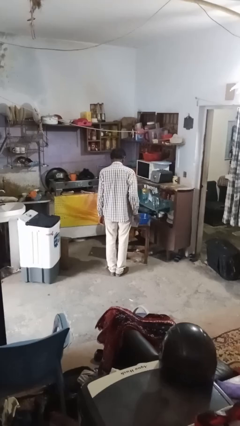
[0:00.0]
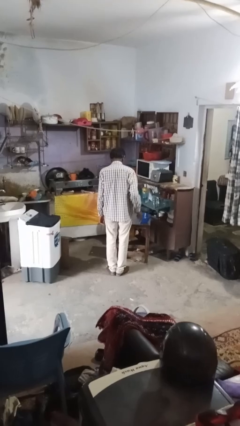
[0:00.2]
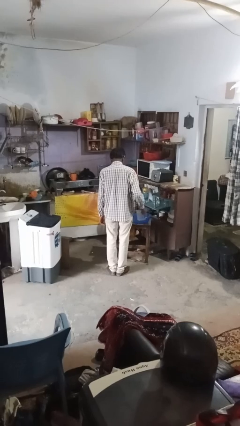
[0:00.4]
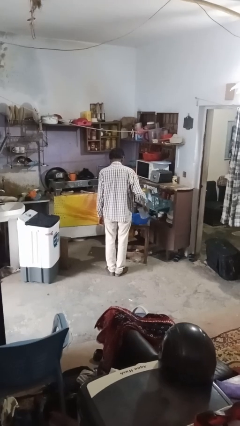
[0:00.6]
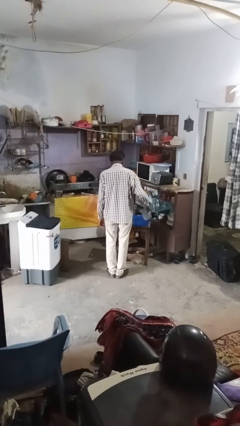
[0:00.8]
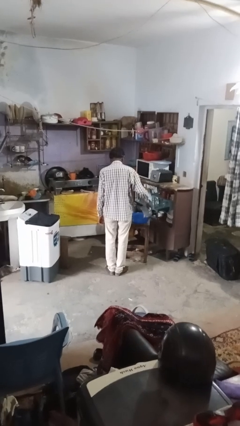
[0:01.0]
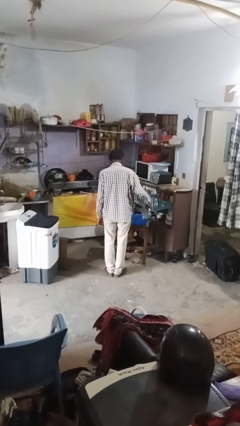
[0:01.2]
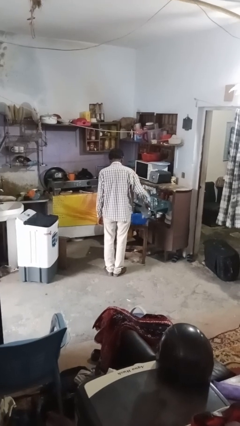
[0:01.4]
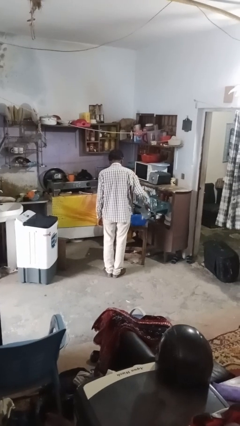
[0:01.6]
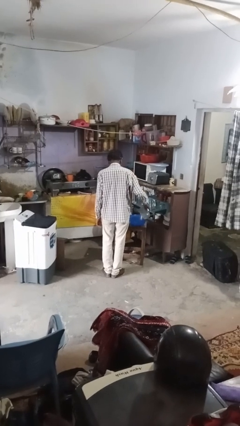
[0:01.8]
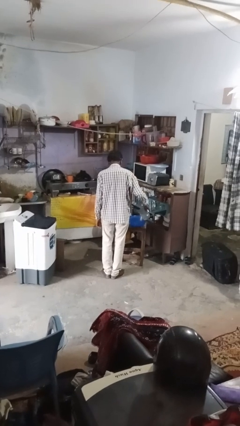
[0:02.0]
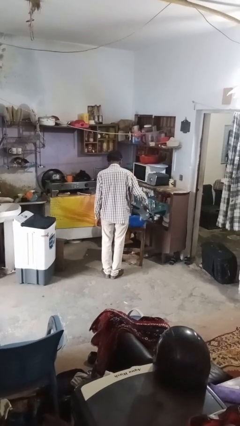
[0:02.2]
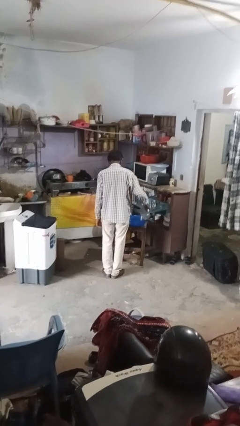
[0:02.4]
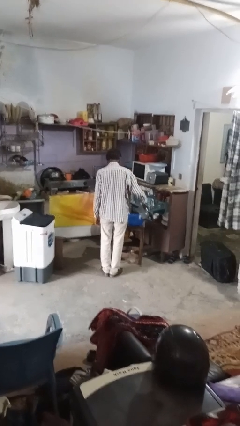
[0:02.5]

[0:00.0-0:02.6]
person pours into bowl

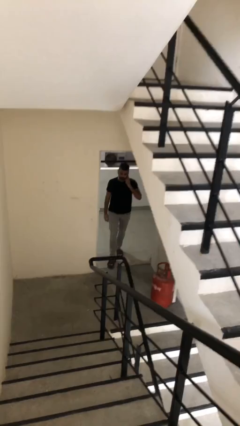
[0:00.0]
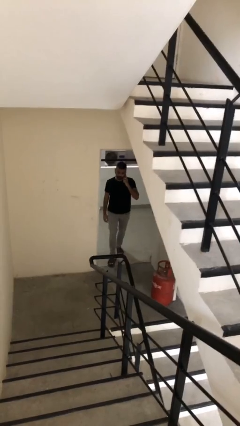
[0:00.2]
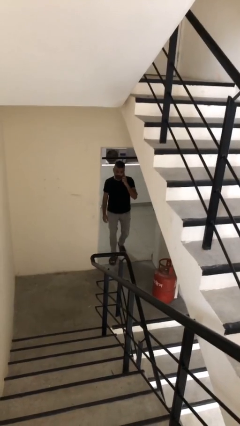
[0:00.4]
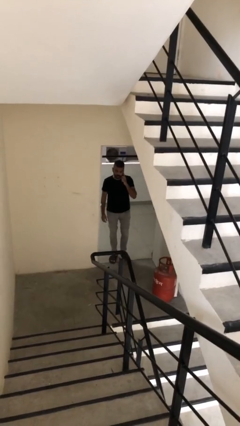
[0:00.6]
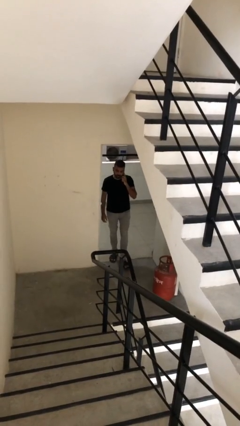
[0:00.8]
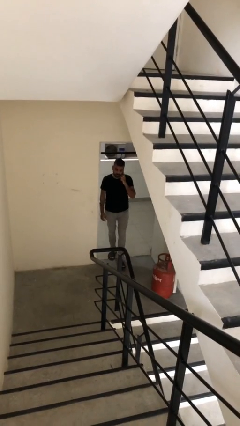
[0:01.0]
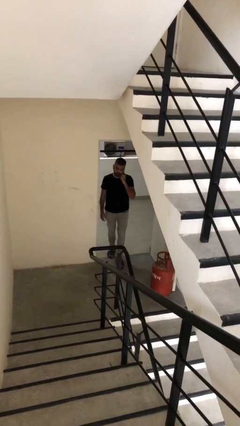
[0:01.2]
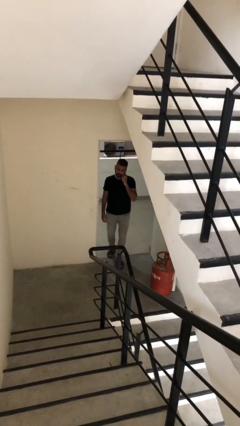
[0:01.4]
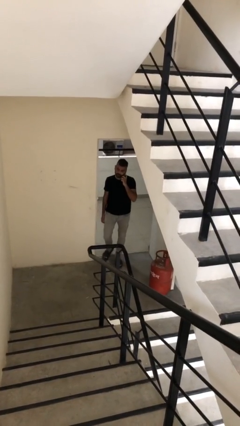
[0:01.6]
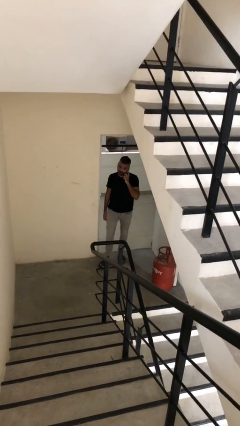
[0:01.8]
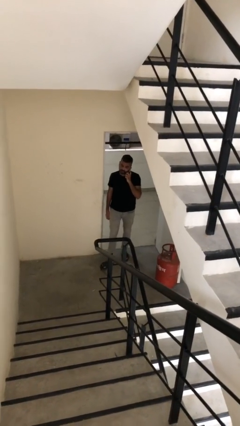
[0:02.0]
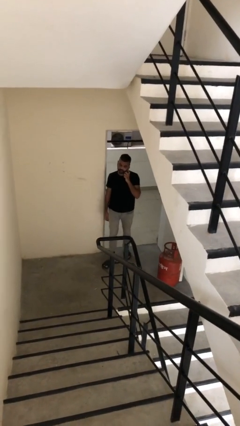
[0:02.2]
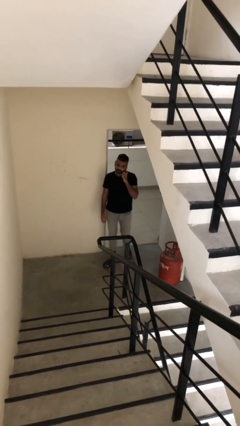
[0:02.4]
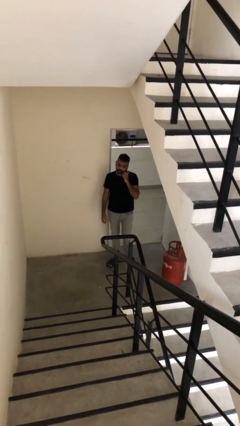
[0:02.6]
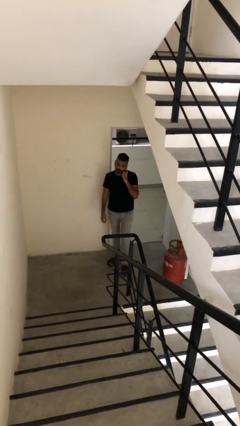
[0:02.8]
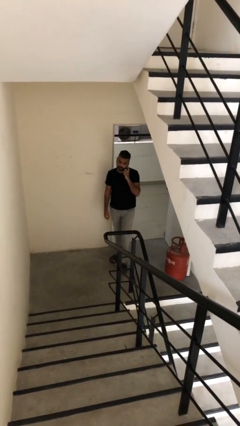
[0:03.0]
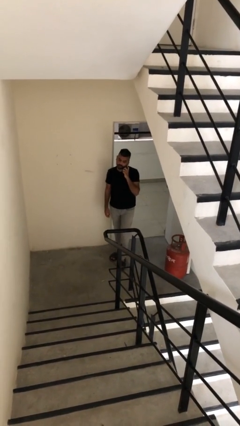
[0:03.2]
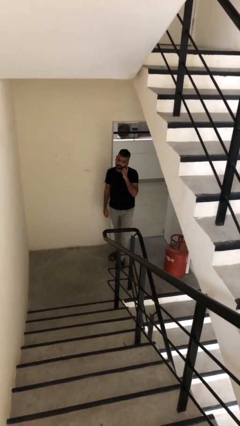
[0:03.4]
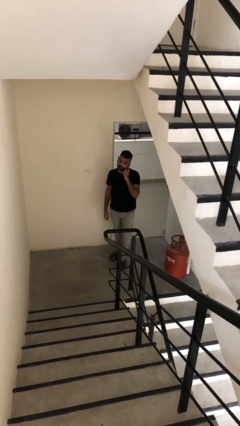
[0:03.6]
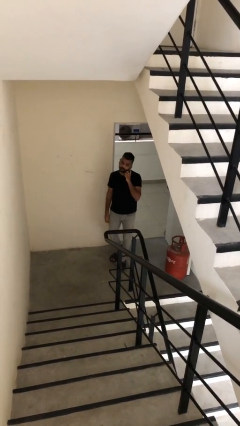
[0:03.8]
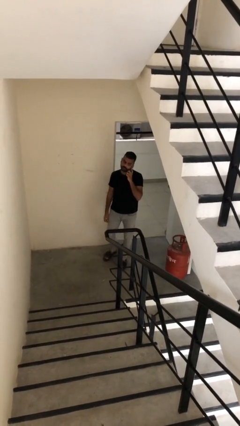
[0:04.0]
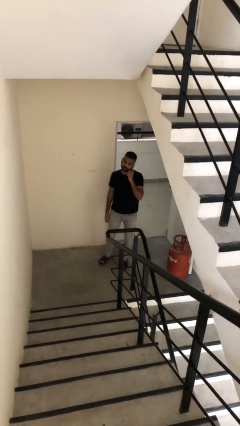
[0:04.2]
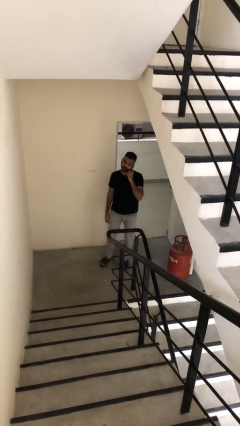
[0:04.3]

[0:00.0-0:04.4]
person enters scene through structure

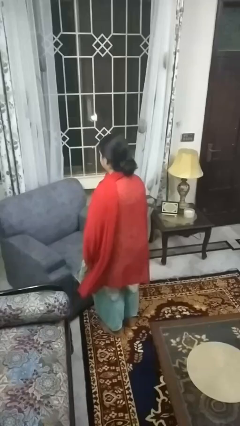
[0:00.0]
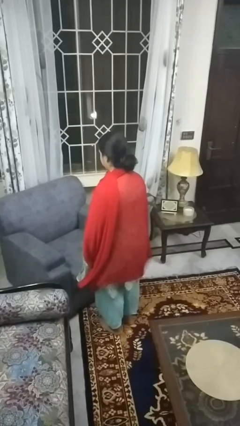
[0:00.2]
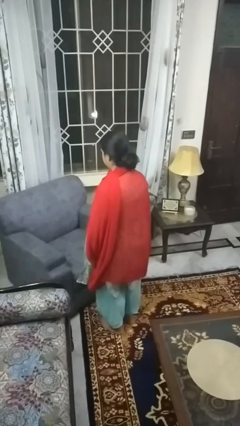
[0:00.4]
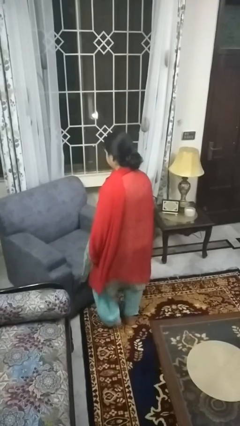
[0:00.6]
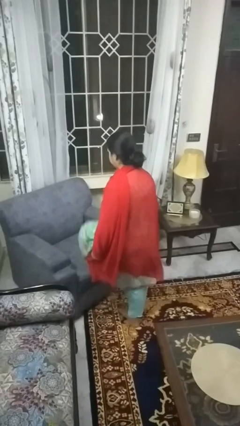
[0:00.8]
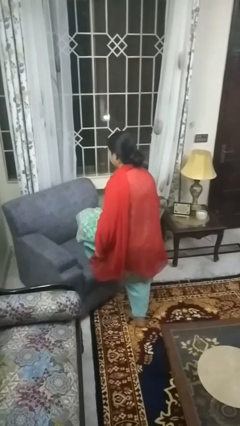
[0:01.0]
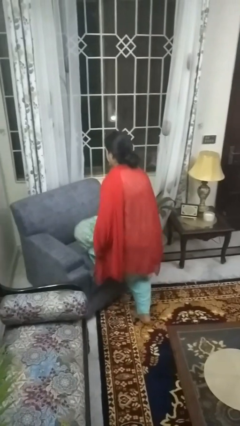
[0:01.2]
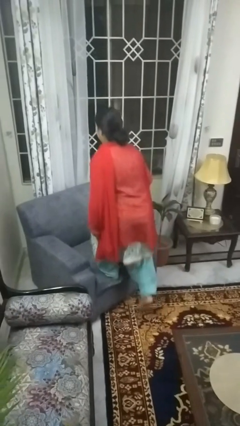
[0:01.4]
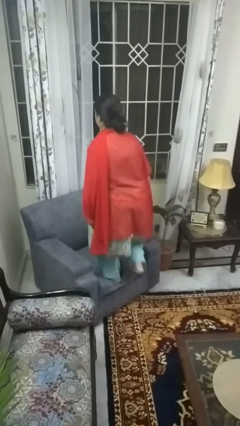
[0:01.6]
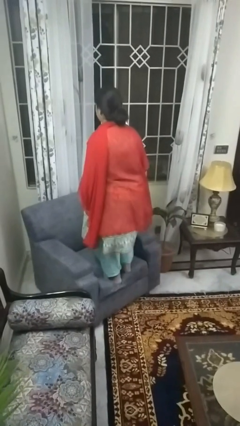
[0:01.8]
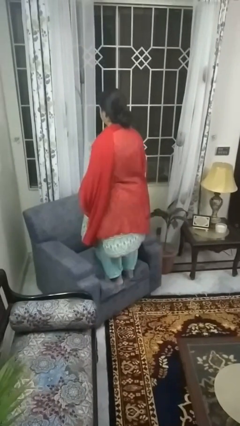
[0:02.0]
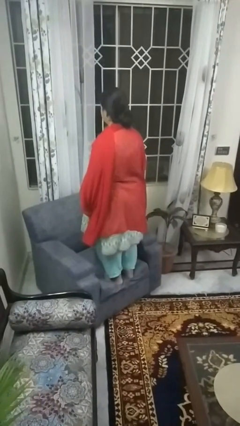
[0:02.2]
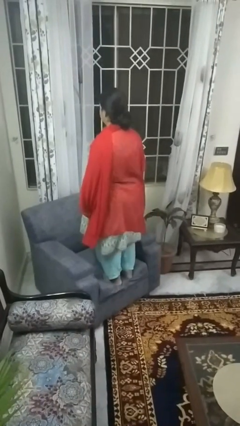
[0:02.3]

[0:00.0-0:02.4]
person climbs on couch

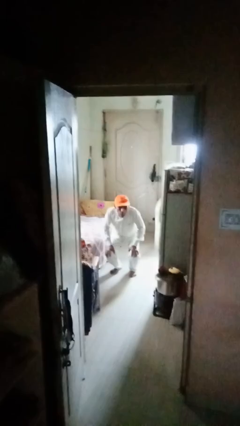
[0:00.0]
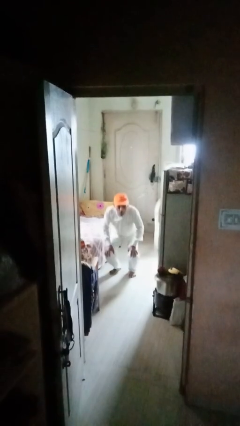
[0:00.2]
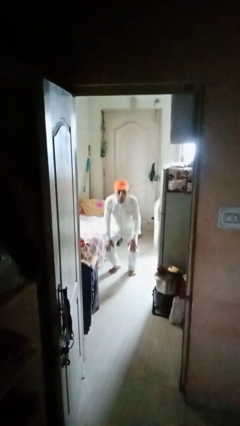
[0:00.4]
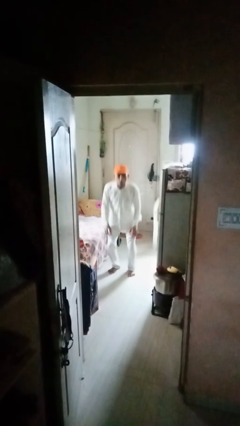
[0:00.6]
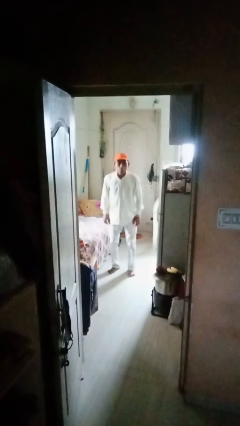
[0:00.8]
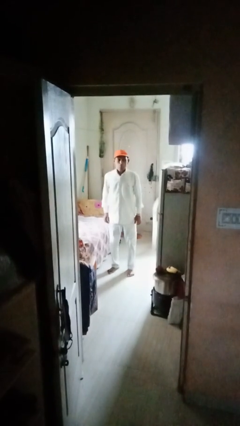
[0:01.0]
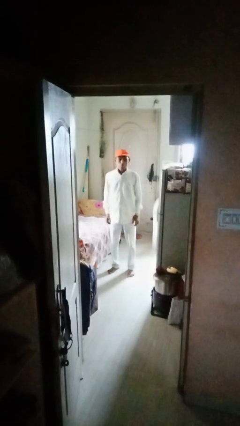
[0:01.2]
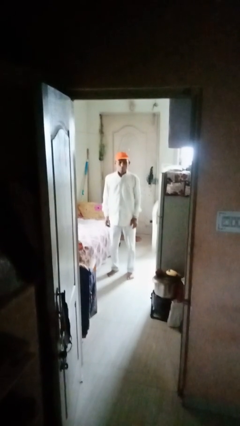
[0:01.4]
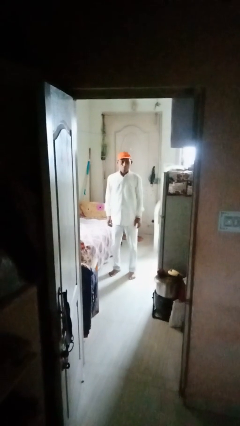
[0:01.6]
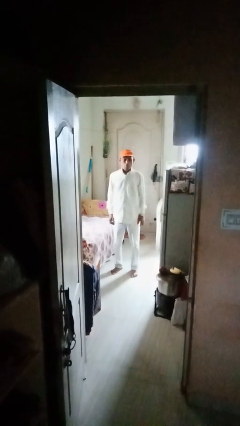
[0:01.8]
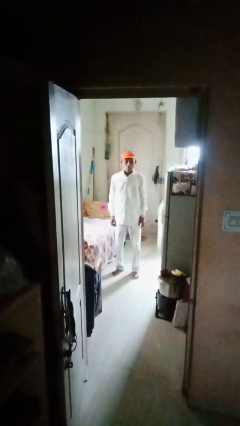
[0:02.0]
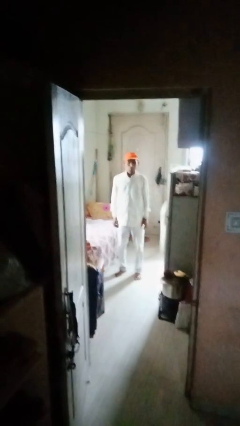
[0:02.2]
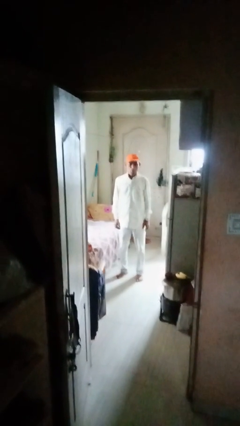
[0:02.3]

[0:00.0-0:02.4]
person stands up

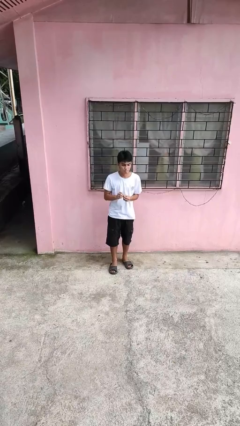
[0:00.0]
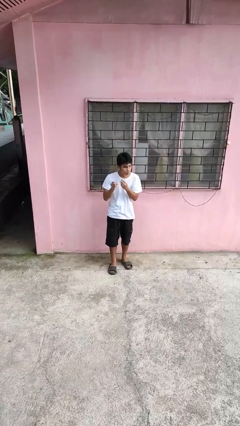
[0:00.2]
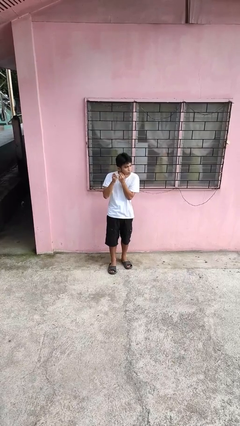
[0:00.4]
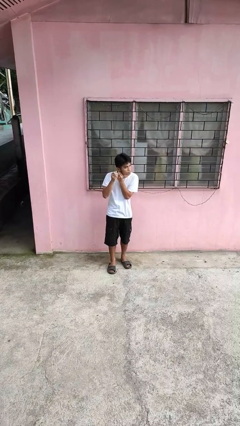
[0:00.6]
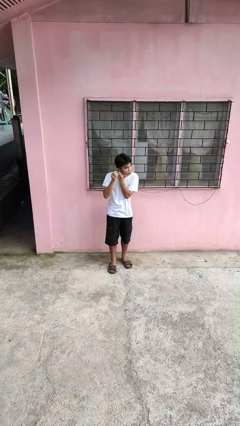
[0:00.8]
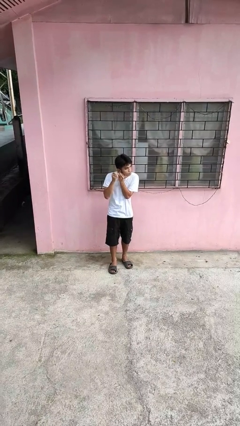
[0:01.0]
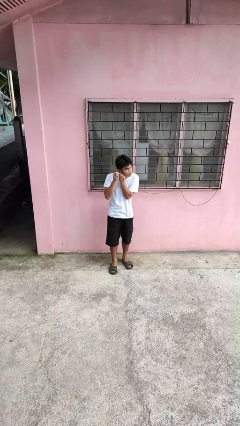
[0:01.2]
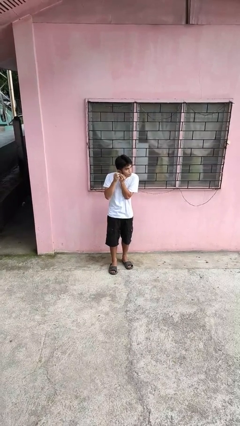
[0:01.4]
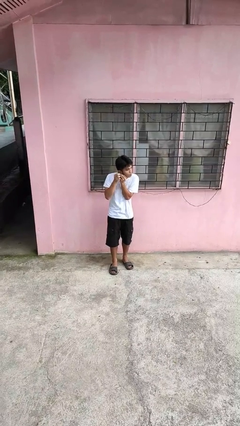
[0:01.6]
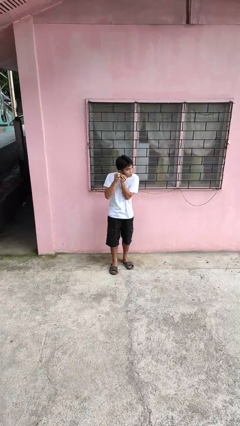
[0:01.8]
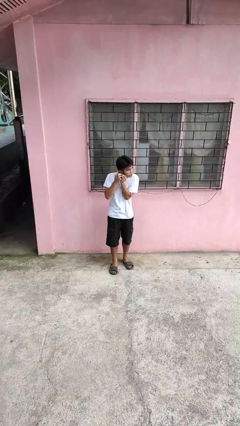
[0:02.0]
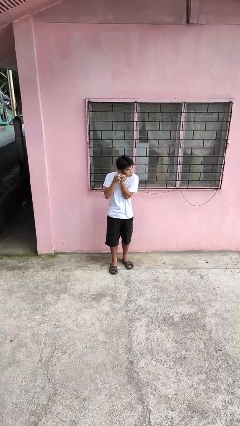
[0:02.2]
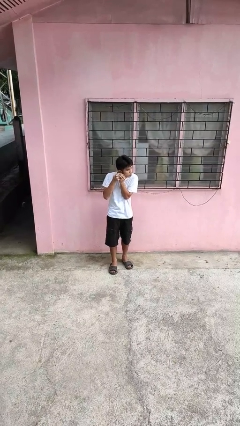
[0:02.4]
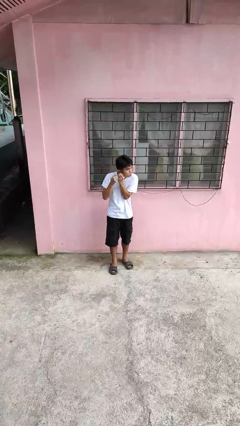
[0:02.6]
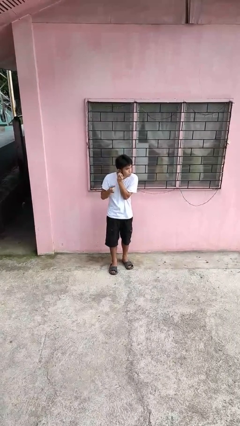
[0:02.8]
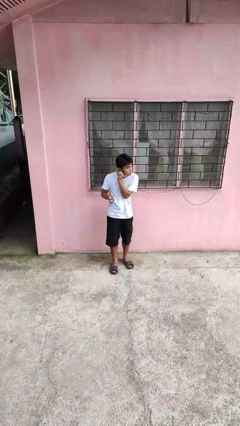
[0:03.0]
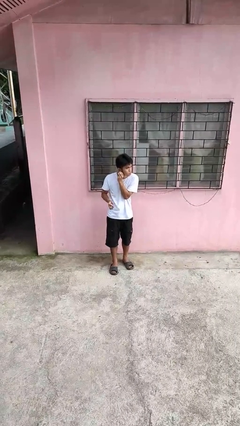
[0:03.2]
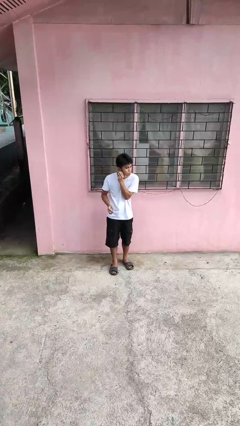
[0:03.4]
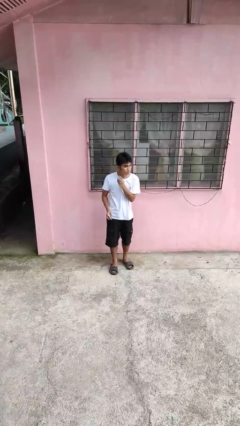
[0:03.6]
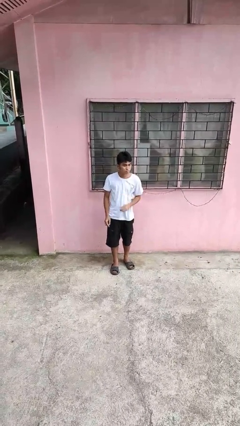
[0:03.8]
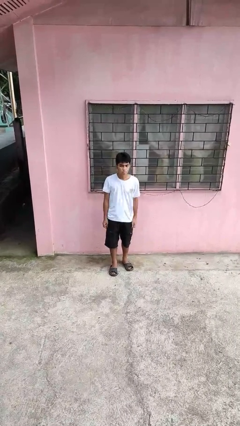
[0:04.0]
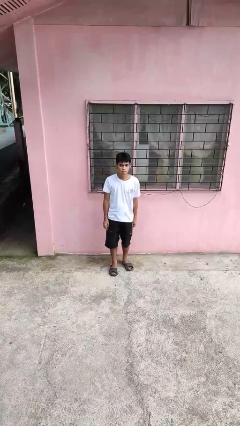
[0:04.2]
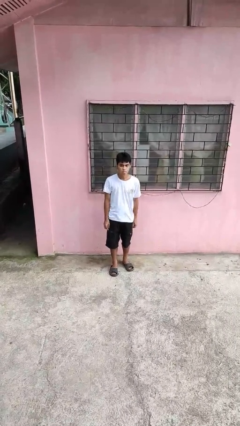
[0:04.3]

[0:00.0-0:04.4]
person puts on earrings

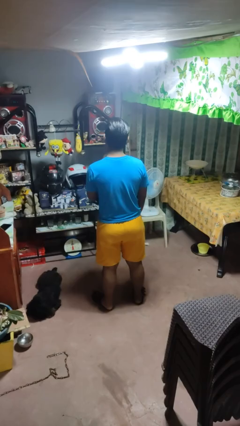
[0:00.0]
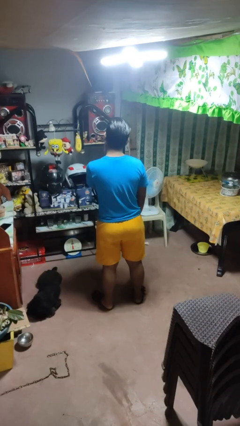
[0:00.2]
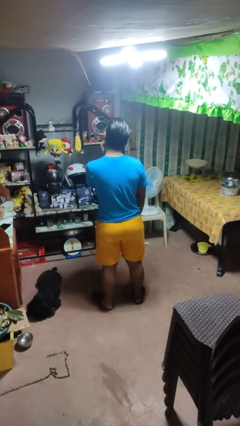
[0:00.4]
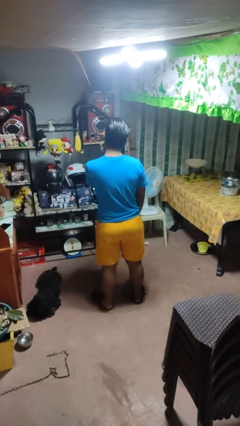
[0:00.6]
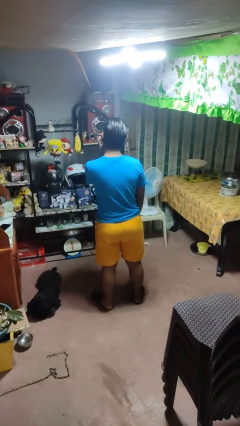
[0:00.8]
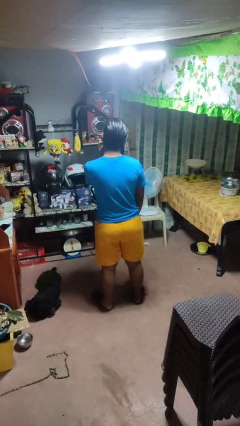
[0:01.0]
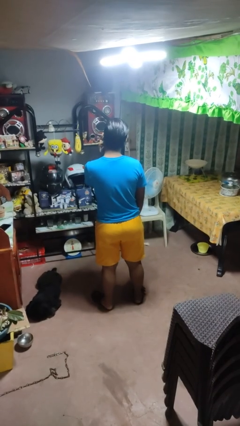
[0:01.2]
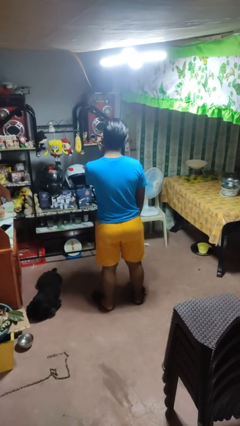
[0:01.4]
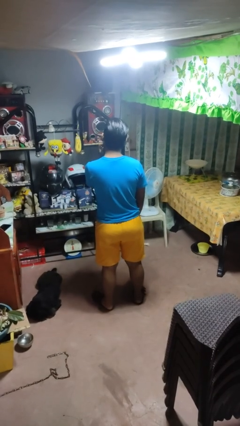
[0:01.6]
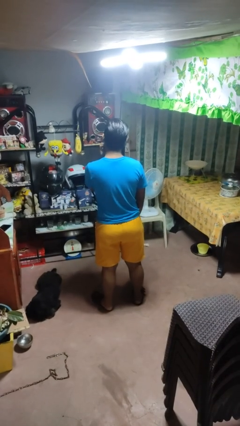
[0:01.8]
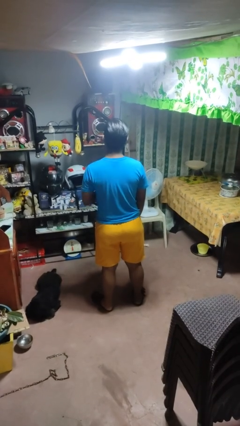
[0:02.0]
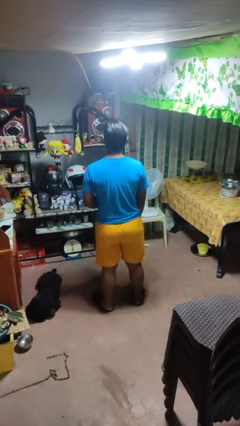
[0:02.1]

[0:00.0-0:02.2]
person scratches face
